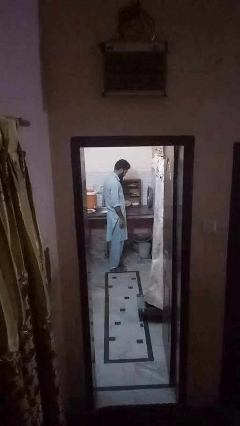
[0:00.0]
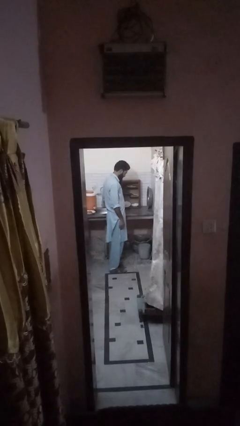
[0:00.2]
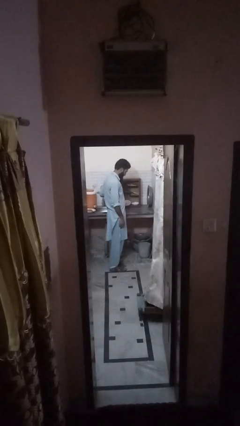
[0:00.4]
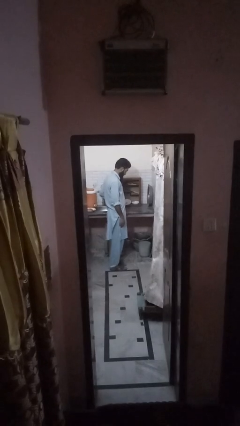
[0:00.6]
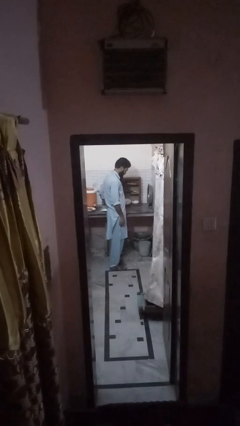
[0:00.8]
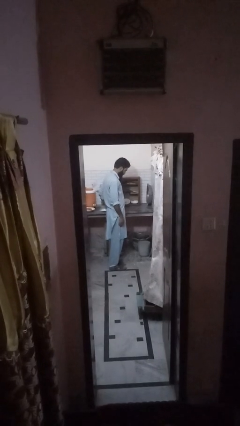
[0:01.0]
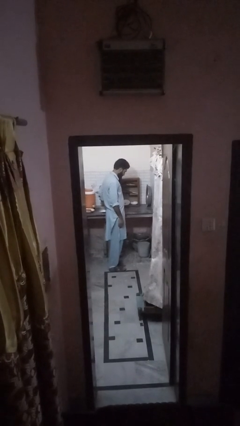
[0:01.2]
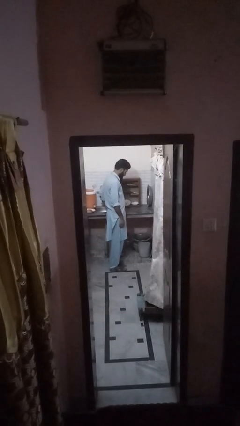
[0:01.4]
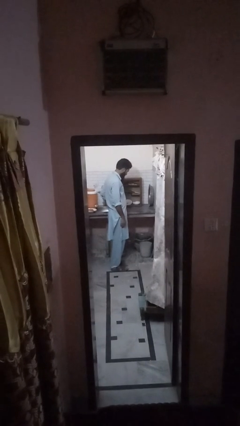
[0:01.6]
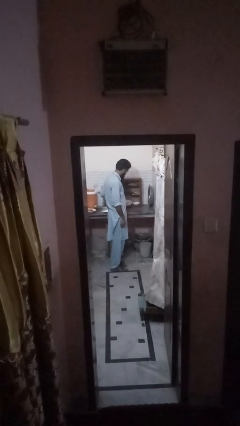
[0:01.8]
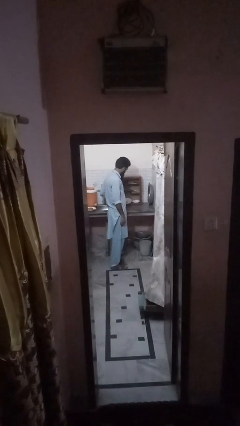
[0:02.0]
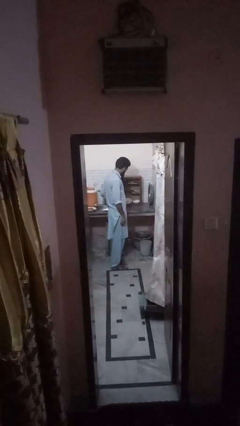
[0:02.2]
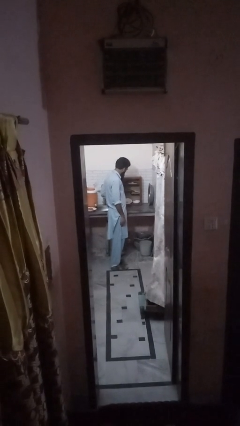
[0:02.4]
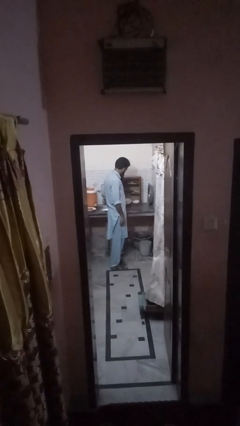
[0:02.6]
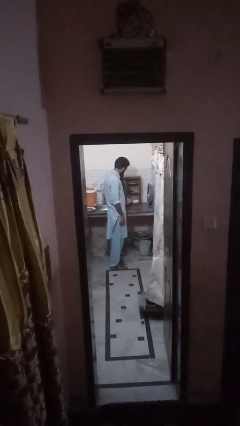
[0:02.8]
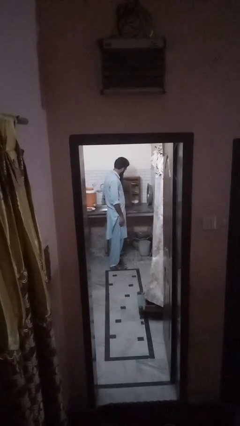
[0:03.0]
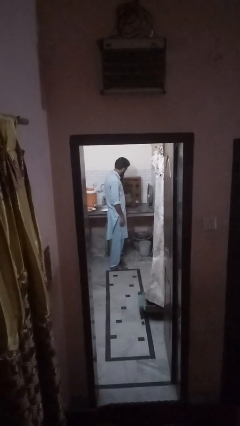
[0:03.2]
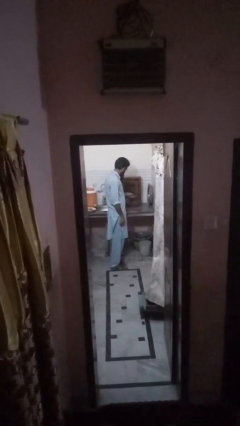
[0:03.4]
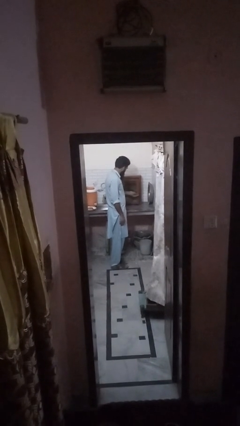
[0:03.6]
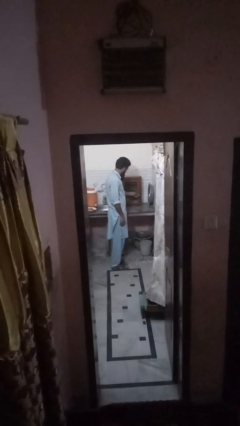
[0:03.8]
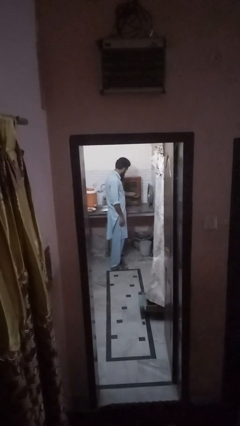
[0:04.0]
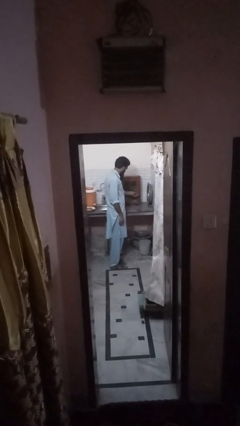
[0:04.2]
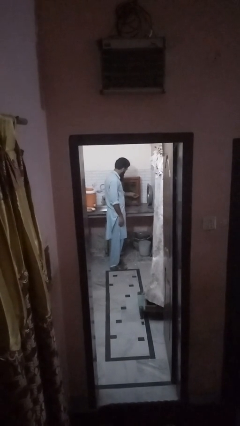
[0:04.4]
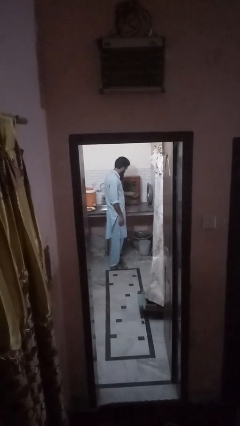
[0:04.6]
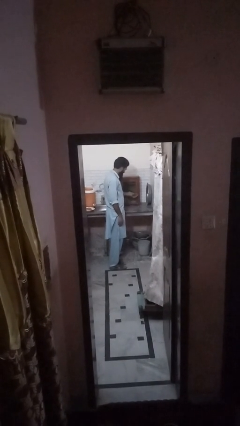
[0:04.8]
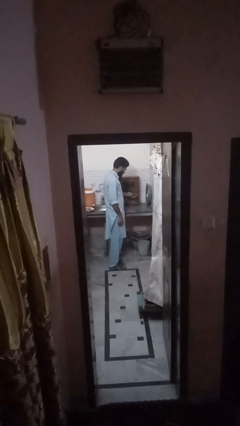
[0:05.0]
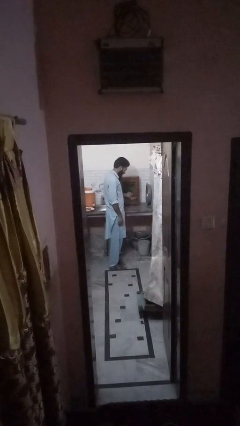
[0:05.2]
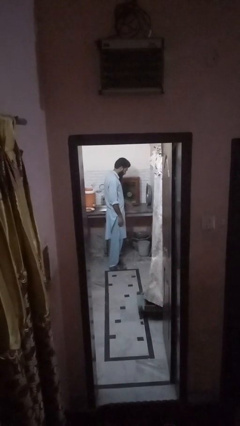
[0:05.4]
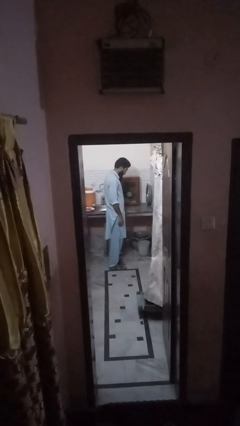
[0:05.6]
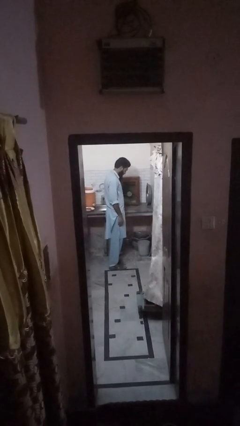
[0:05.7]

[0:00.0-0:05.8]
person closes cabinet

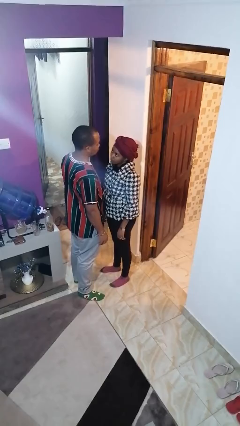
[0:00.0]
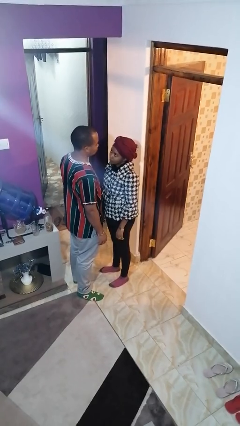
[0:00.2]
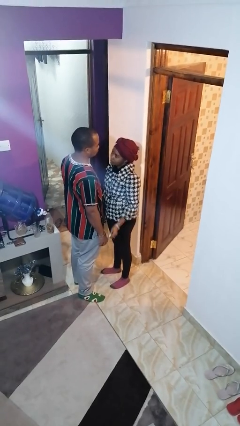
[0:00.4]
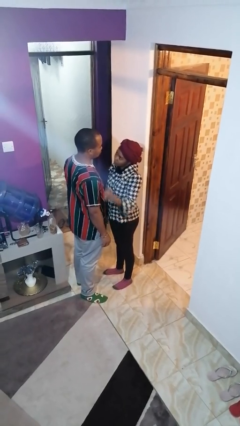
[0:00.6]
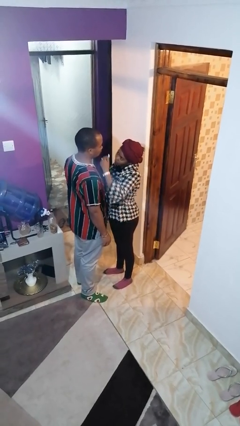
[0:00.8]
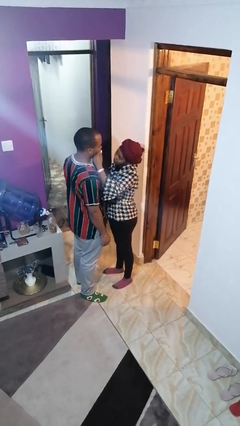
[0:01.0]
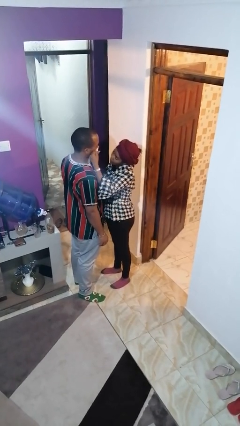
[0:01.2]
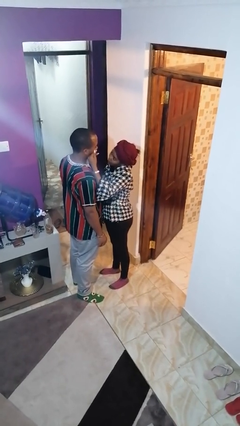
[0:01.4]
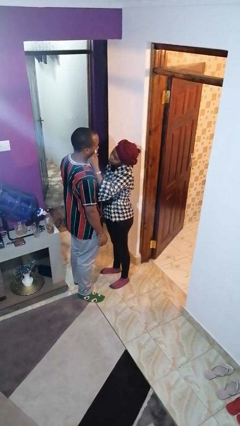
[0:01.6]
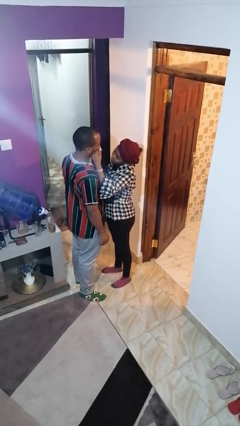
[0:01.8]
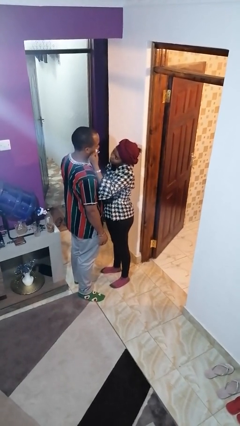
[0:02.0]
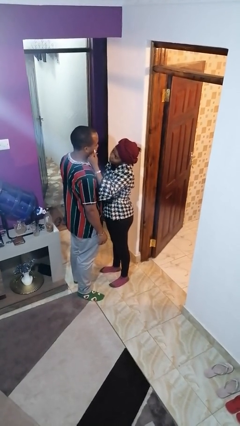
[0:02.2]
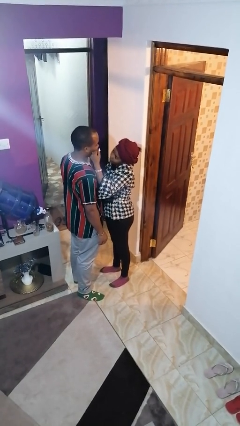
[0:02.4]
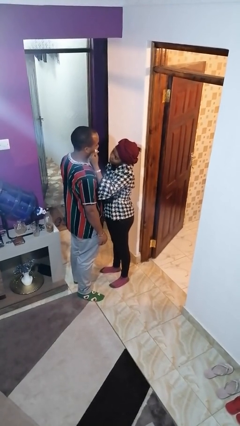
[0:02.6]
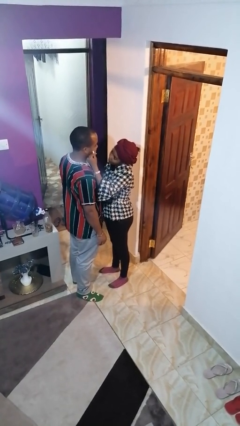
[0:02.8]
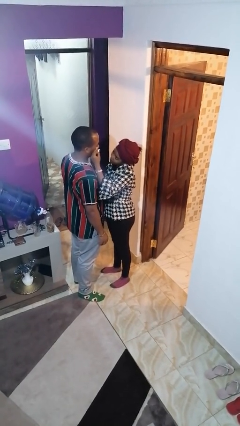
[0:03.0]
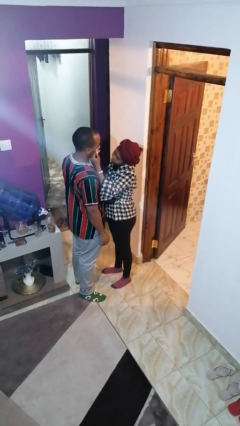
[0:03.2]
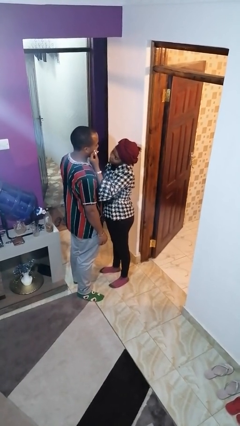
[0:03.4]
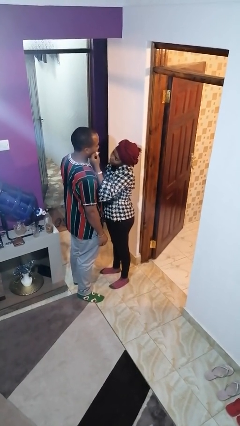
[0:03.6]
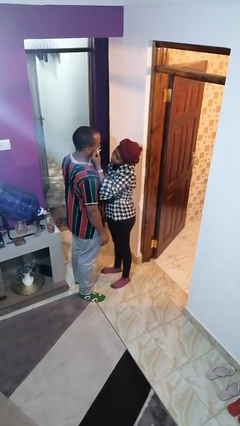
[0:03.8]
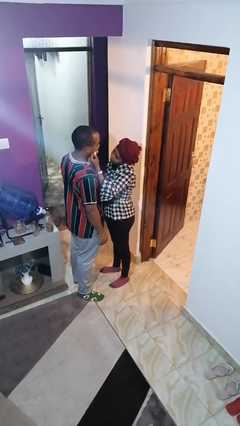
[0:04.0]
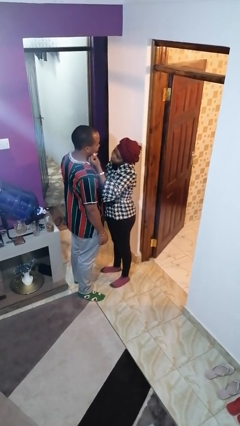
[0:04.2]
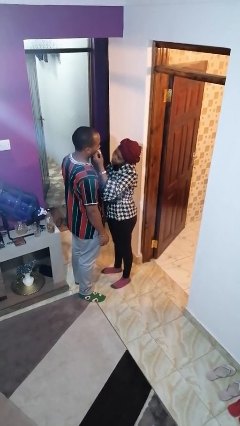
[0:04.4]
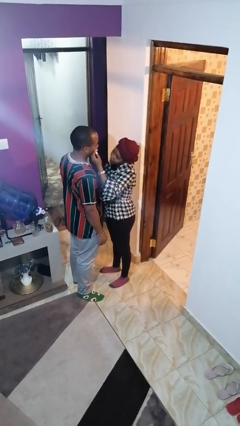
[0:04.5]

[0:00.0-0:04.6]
person touches face of person

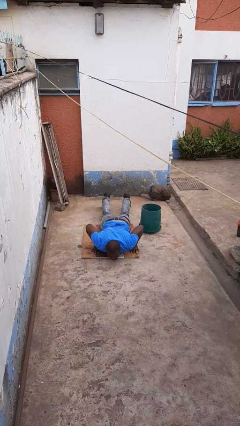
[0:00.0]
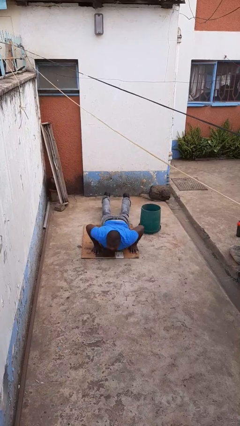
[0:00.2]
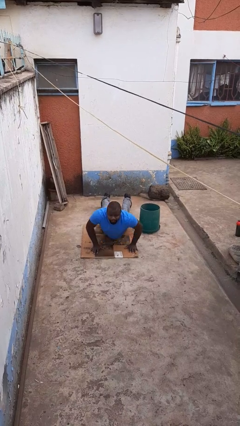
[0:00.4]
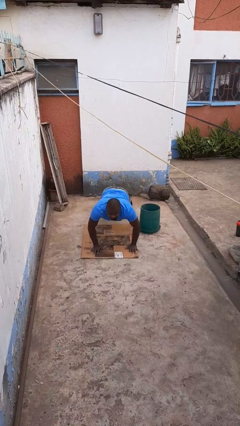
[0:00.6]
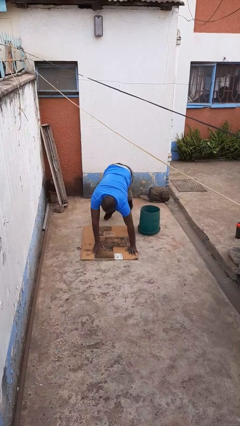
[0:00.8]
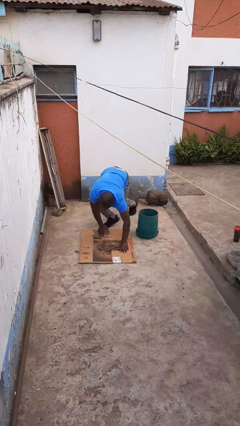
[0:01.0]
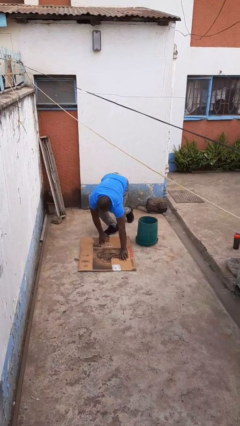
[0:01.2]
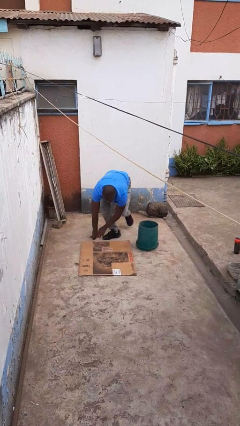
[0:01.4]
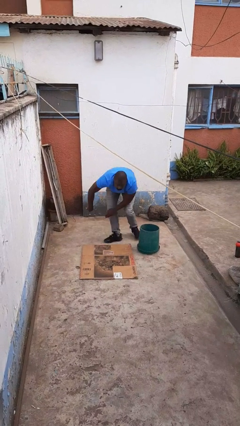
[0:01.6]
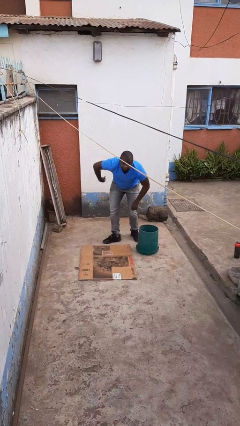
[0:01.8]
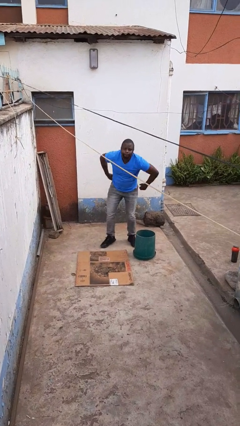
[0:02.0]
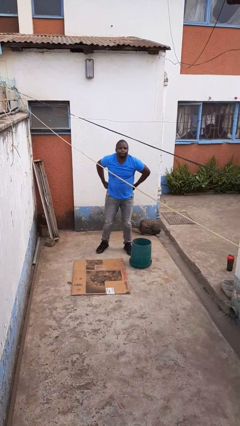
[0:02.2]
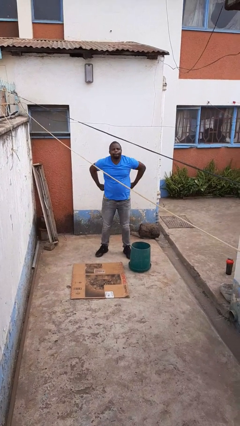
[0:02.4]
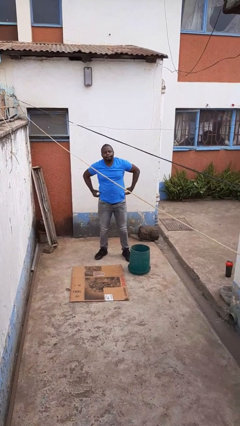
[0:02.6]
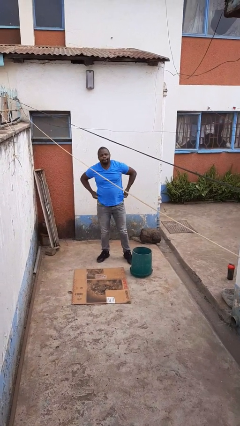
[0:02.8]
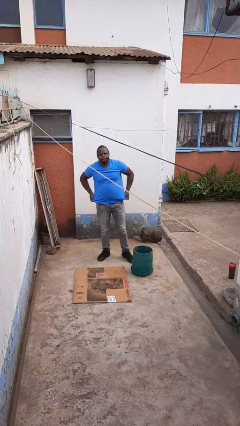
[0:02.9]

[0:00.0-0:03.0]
person stands up from floor

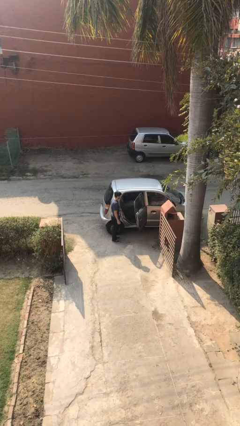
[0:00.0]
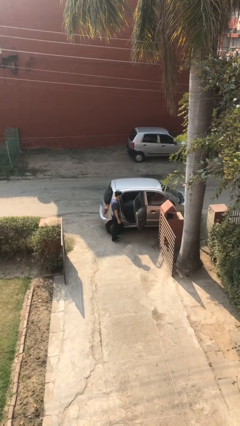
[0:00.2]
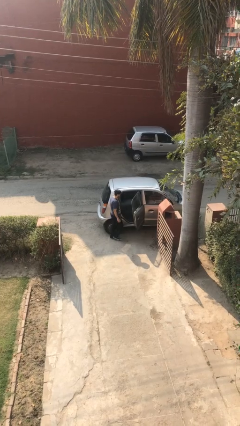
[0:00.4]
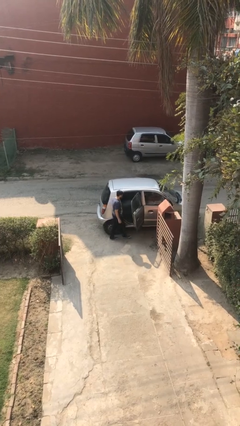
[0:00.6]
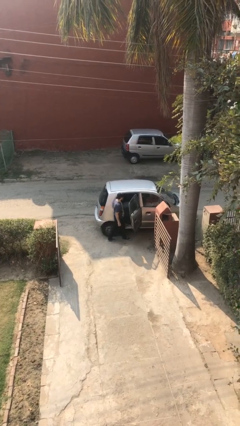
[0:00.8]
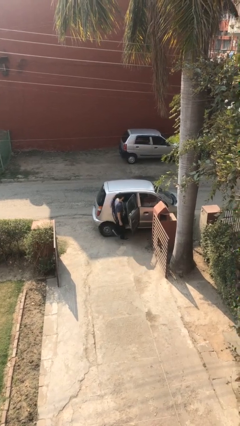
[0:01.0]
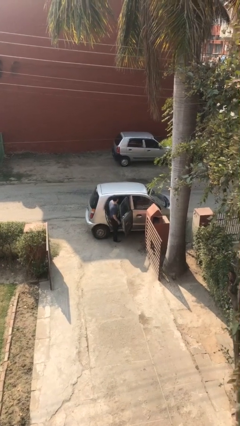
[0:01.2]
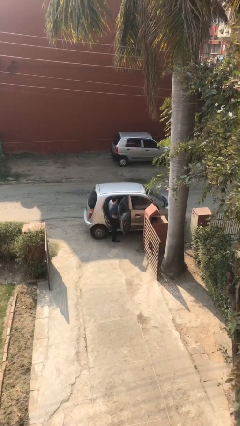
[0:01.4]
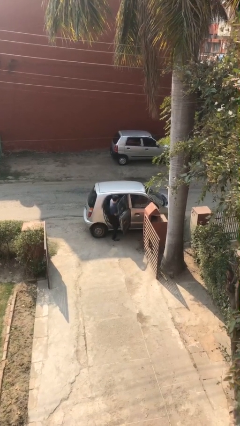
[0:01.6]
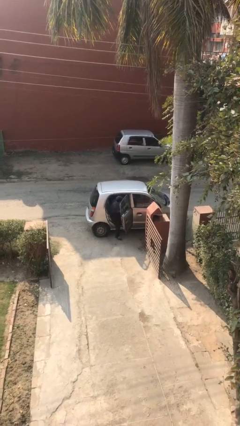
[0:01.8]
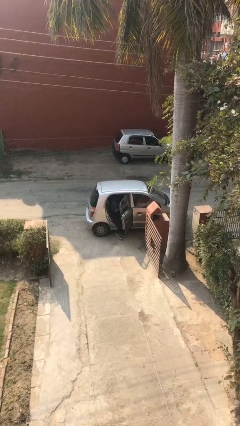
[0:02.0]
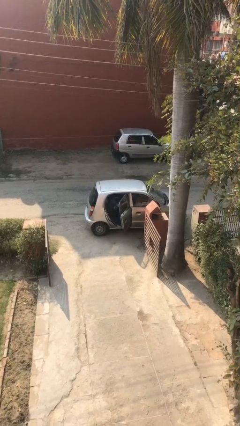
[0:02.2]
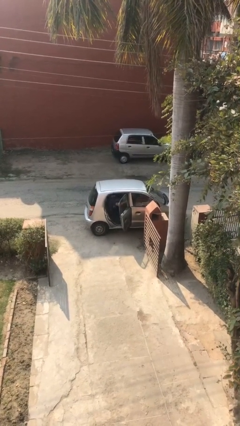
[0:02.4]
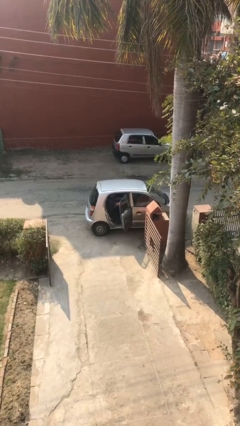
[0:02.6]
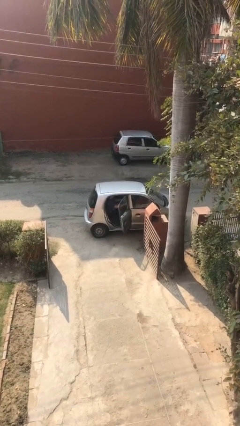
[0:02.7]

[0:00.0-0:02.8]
person enters car

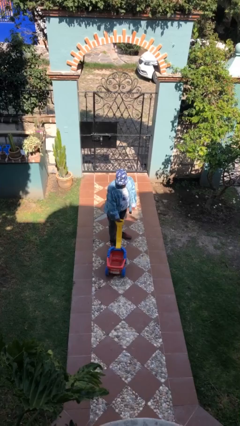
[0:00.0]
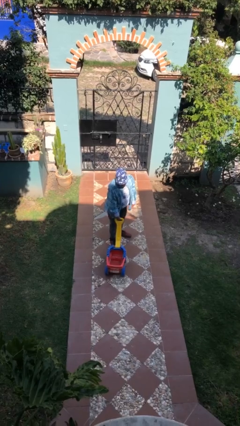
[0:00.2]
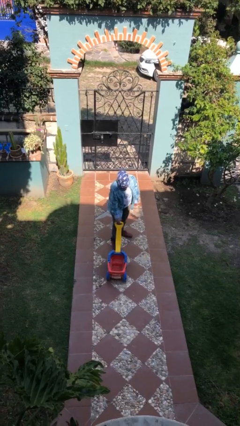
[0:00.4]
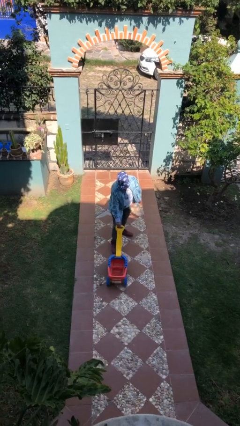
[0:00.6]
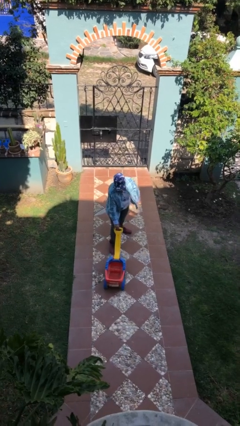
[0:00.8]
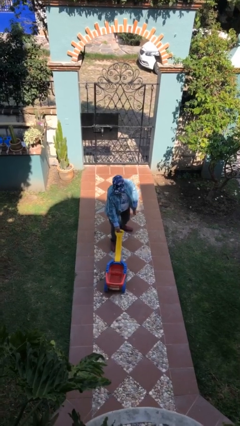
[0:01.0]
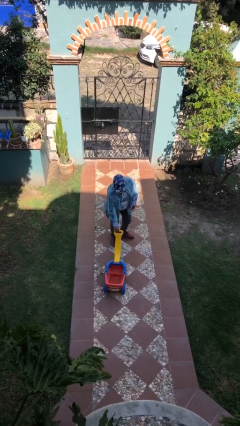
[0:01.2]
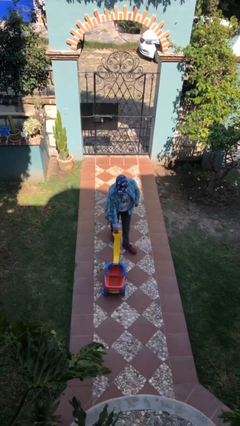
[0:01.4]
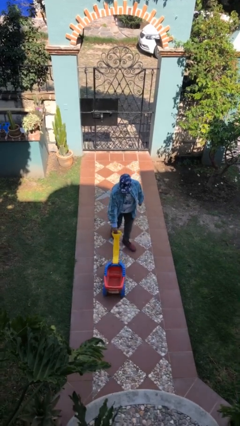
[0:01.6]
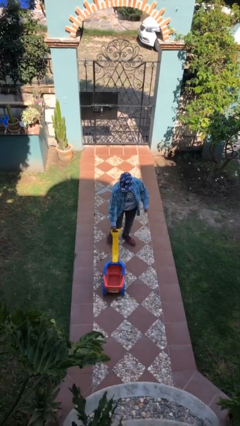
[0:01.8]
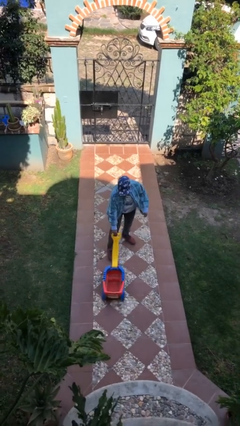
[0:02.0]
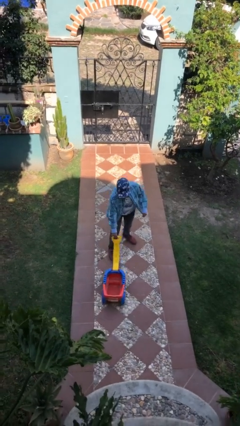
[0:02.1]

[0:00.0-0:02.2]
person pushes wheeled cart
